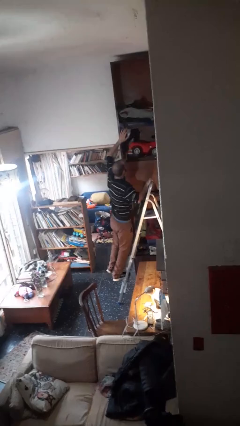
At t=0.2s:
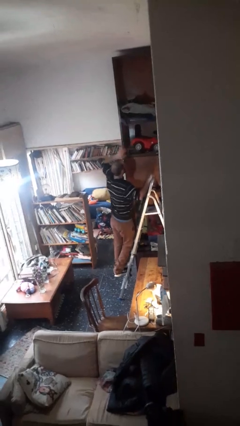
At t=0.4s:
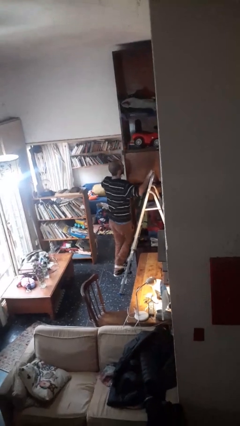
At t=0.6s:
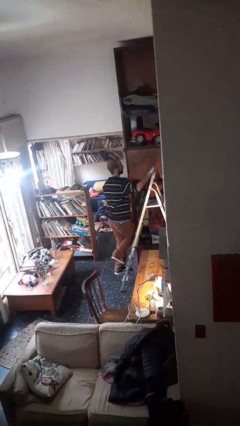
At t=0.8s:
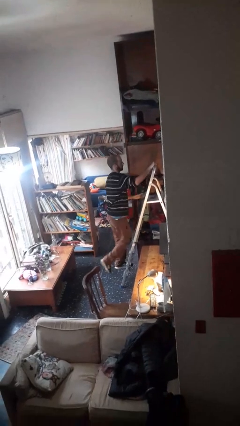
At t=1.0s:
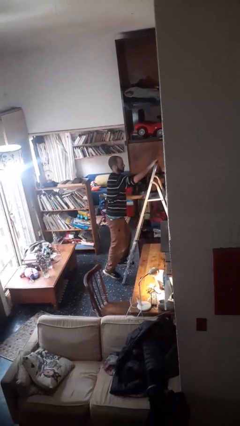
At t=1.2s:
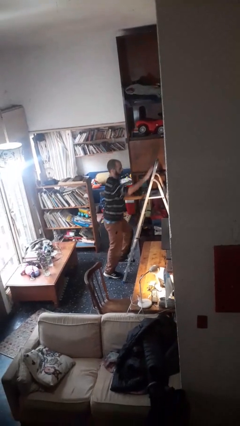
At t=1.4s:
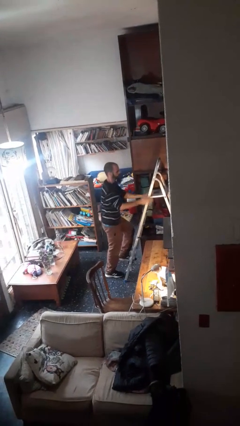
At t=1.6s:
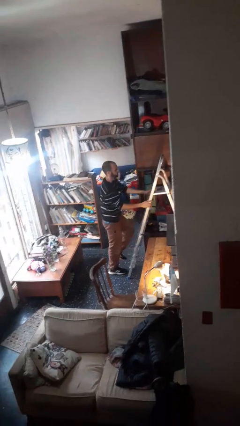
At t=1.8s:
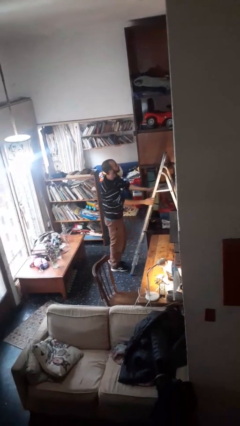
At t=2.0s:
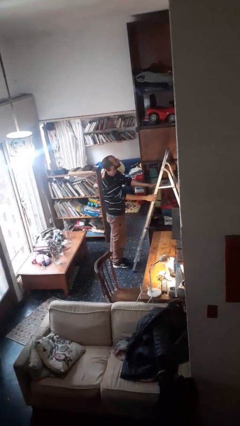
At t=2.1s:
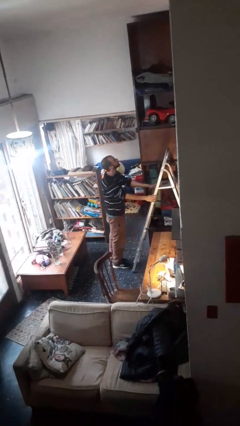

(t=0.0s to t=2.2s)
person climbs down ladder

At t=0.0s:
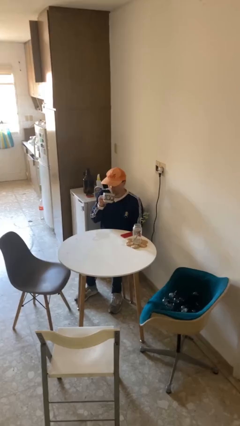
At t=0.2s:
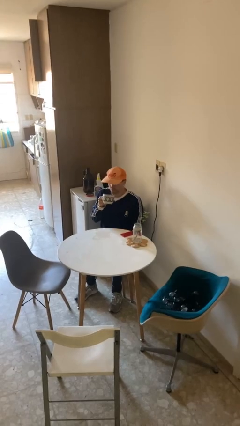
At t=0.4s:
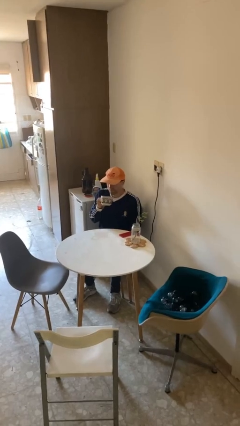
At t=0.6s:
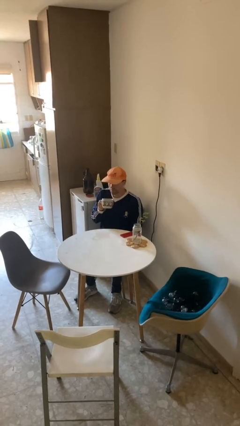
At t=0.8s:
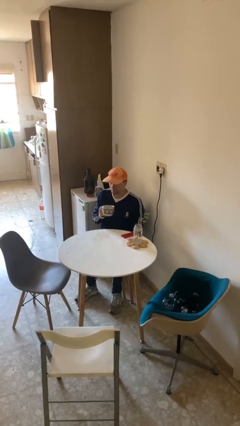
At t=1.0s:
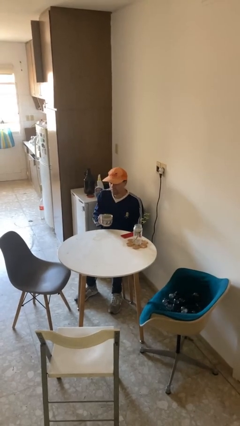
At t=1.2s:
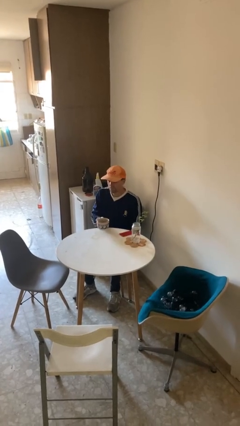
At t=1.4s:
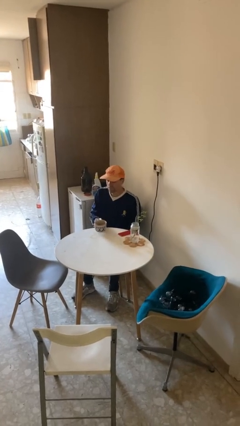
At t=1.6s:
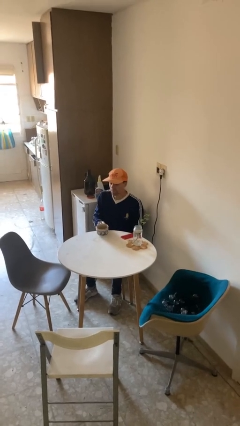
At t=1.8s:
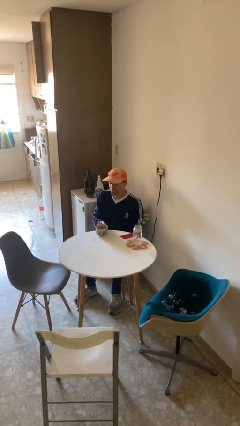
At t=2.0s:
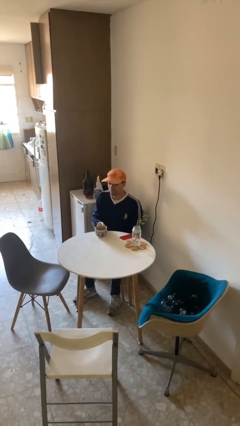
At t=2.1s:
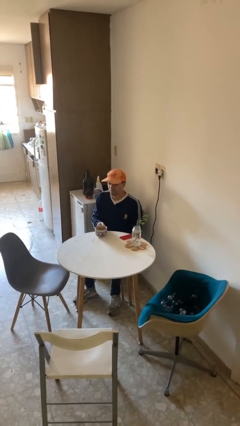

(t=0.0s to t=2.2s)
person puts down object on table

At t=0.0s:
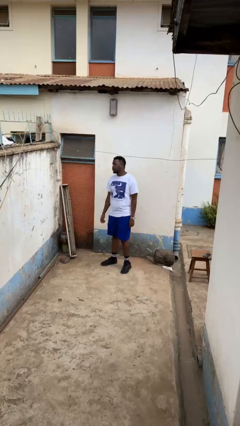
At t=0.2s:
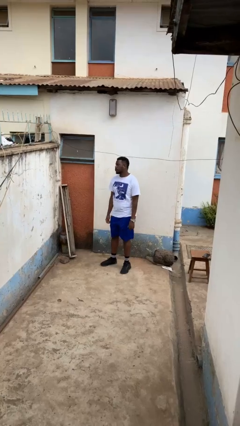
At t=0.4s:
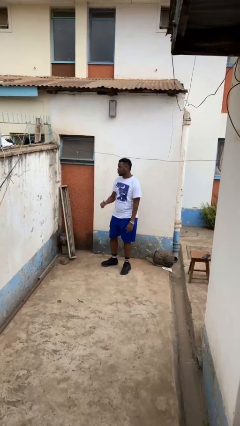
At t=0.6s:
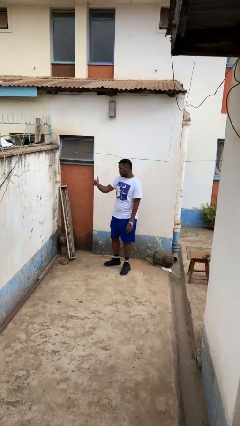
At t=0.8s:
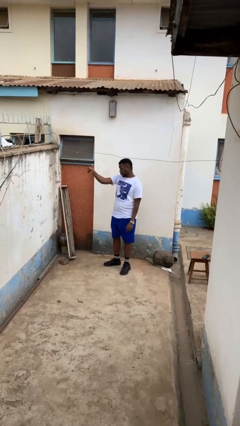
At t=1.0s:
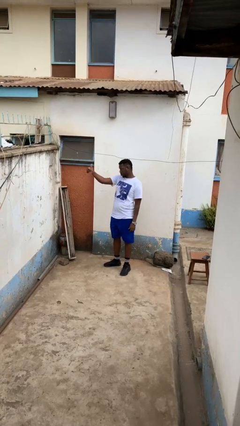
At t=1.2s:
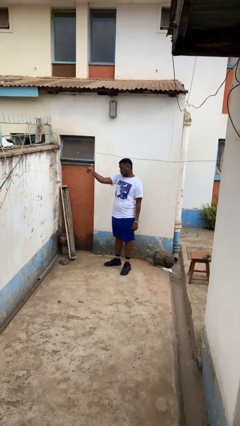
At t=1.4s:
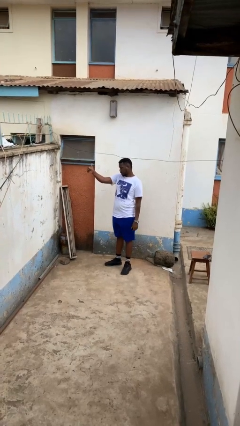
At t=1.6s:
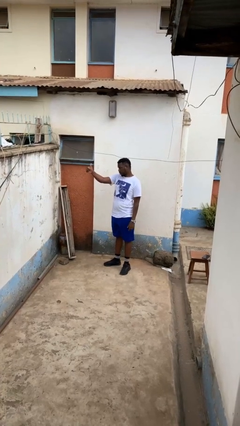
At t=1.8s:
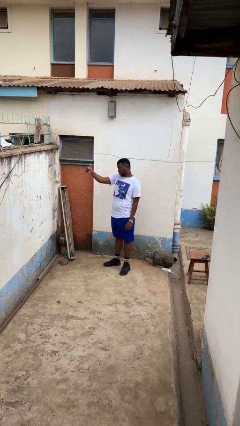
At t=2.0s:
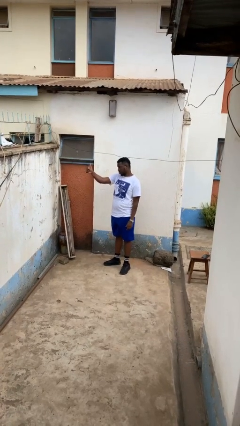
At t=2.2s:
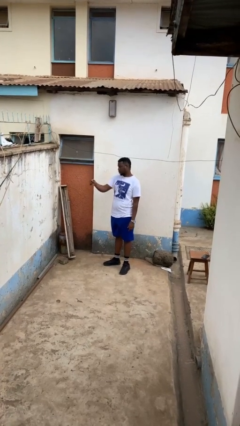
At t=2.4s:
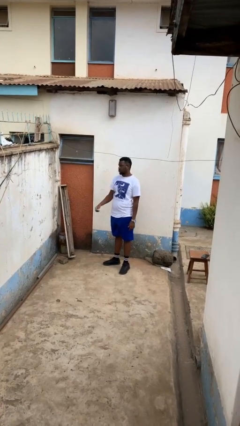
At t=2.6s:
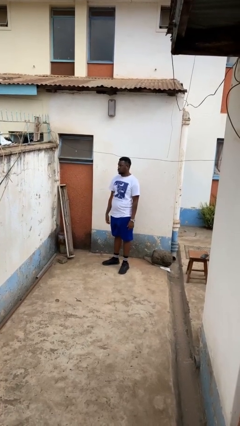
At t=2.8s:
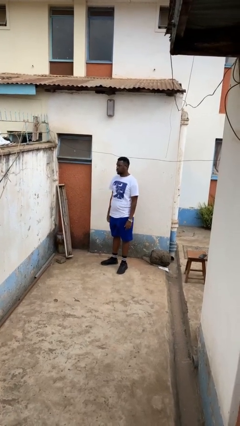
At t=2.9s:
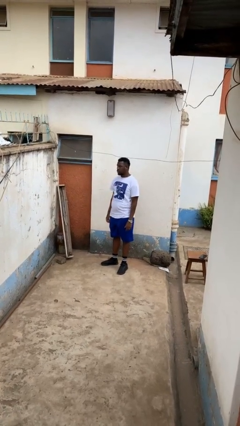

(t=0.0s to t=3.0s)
person gestures thumbs up

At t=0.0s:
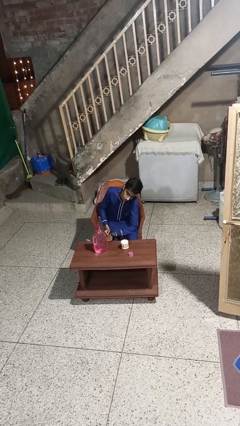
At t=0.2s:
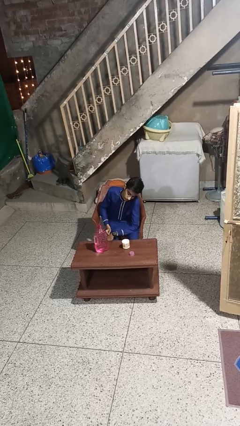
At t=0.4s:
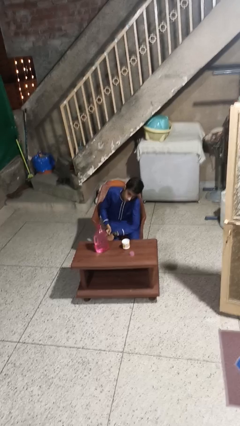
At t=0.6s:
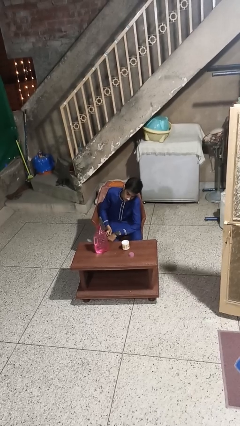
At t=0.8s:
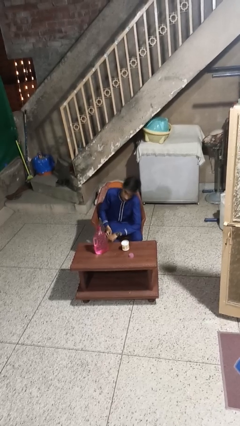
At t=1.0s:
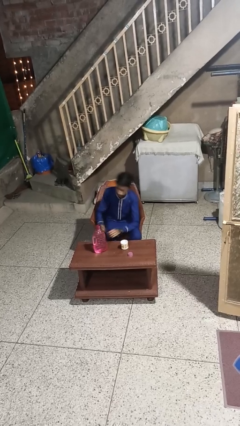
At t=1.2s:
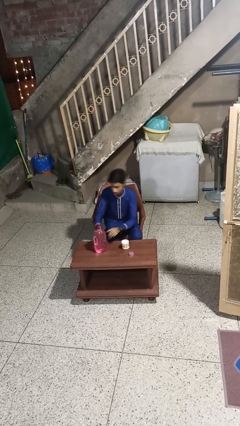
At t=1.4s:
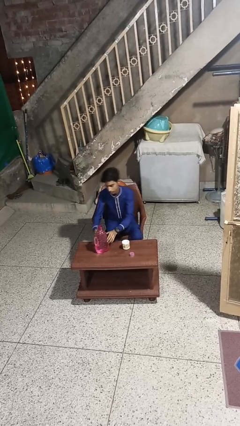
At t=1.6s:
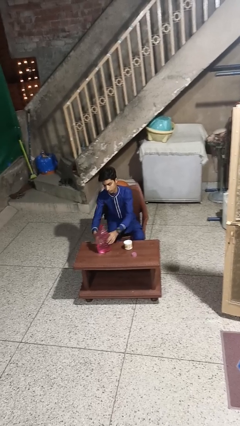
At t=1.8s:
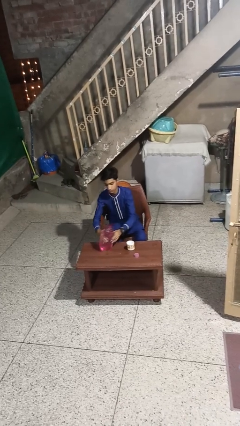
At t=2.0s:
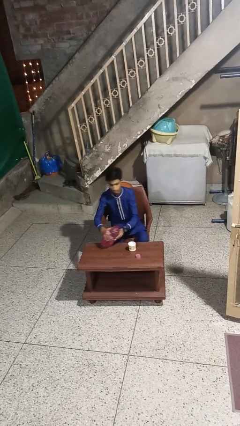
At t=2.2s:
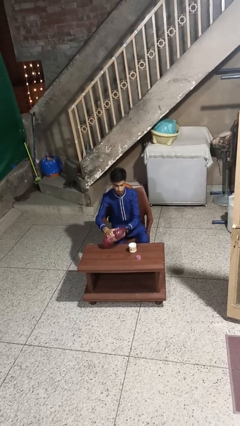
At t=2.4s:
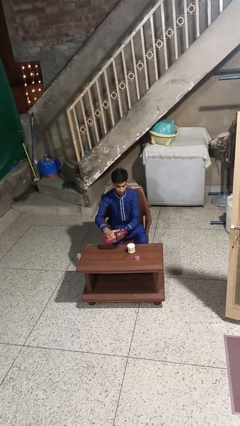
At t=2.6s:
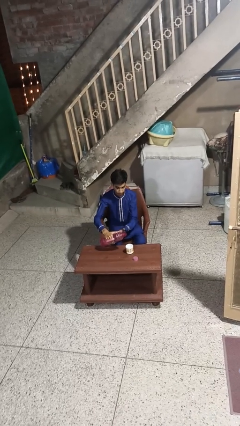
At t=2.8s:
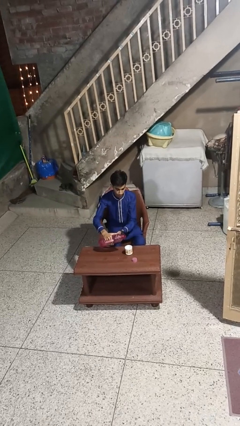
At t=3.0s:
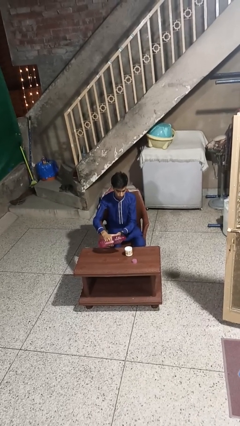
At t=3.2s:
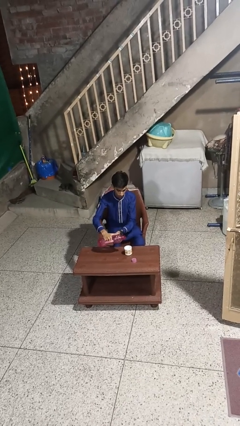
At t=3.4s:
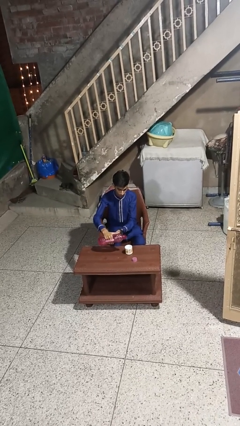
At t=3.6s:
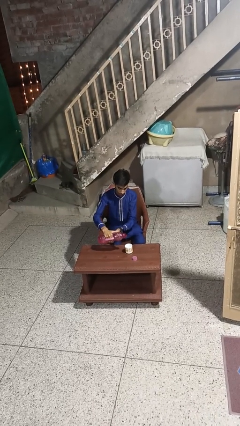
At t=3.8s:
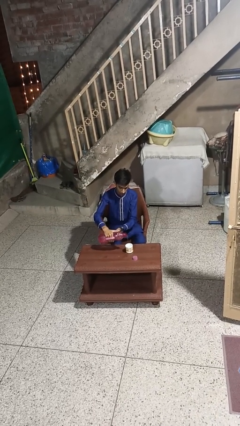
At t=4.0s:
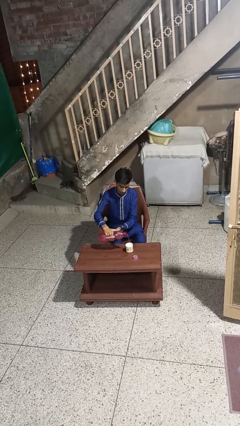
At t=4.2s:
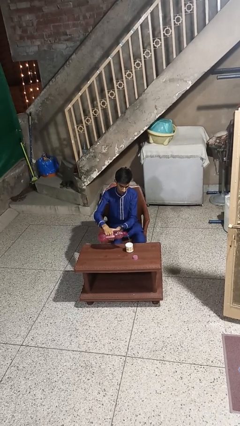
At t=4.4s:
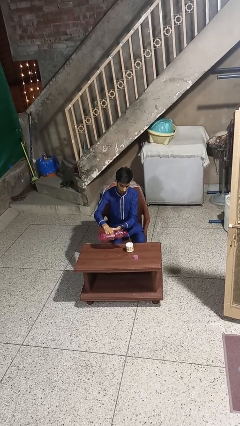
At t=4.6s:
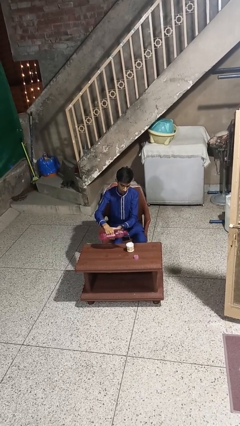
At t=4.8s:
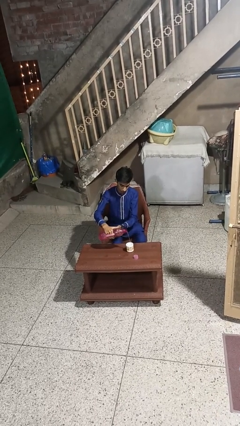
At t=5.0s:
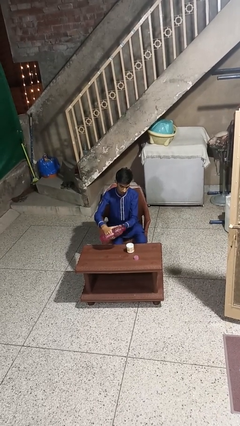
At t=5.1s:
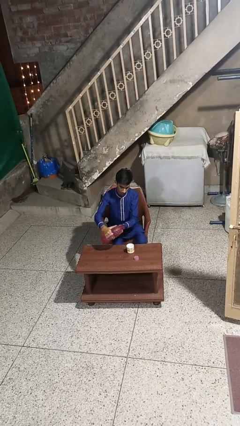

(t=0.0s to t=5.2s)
person pours liquid into cup

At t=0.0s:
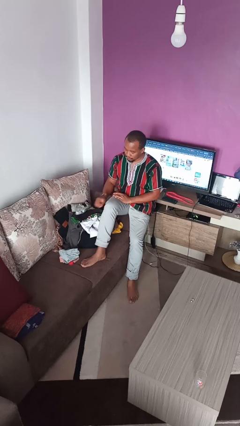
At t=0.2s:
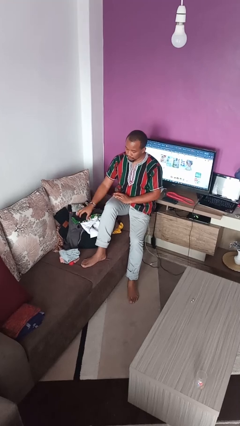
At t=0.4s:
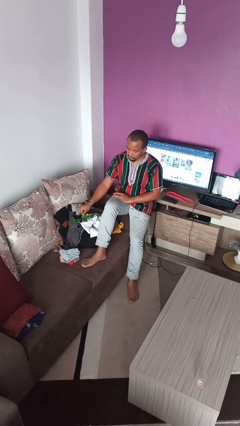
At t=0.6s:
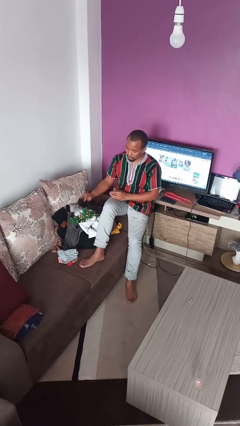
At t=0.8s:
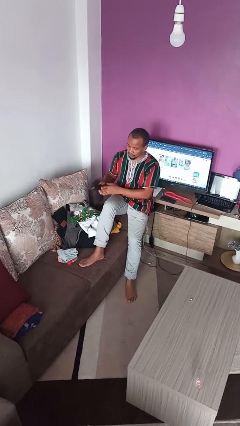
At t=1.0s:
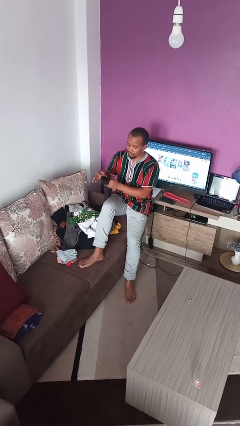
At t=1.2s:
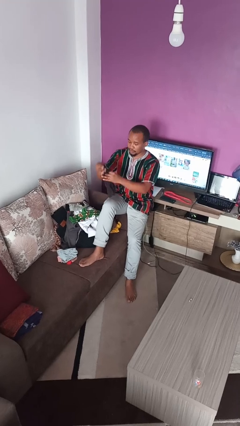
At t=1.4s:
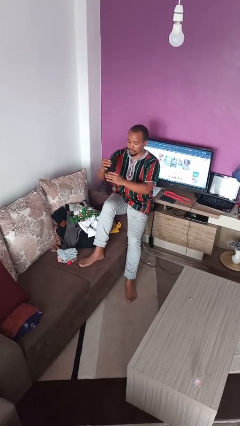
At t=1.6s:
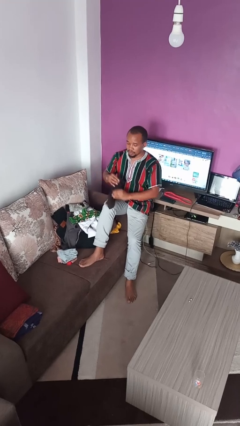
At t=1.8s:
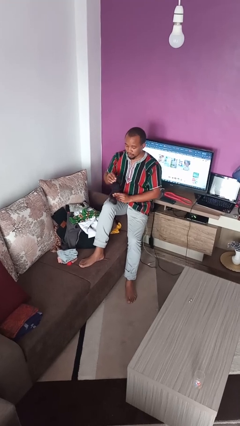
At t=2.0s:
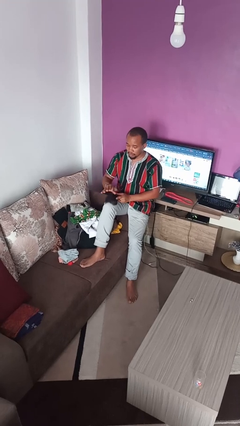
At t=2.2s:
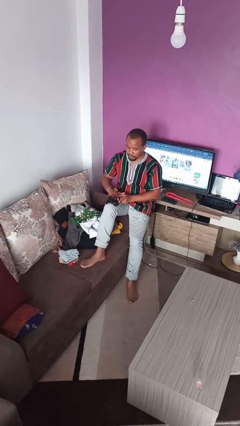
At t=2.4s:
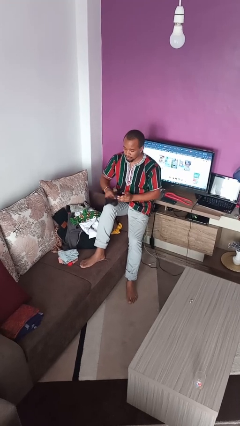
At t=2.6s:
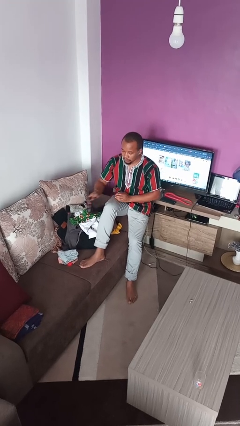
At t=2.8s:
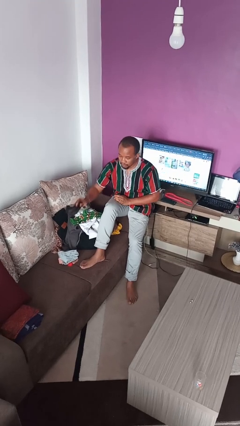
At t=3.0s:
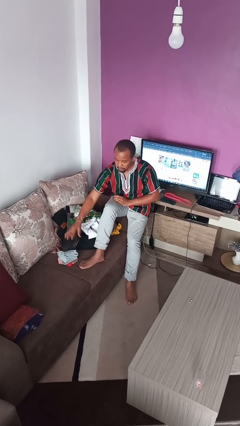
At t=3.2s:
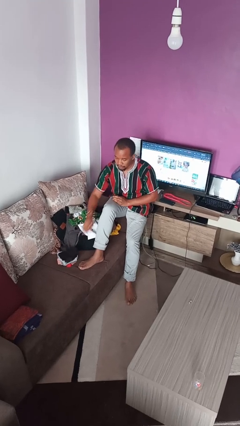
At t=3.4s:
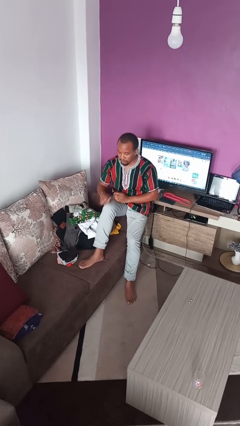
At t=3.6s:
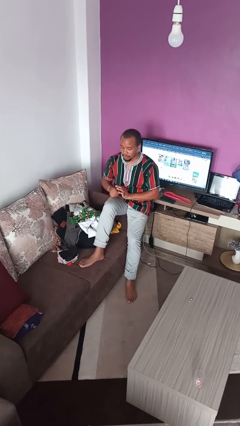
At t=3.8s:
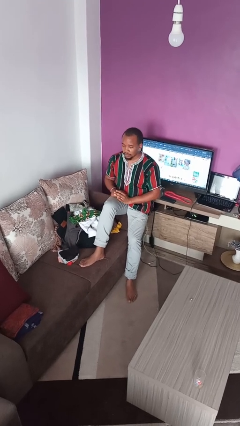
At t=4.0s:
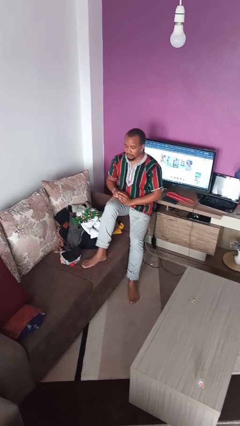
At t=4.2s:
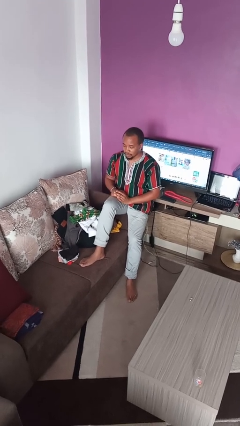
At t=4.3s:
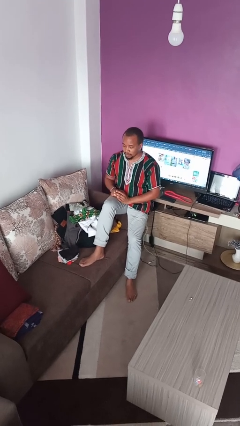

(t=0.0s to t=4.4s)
person folds socks

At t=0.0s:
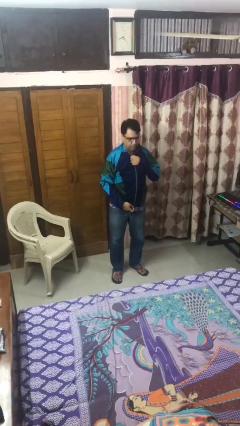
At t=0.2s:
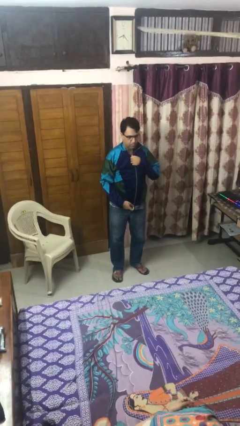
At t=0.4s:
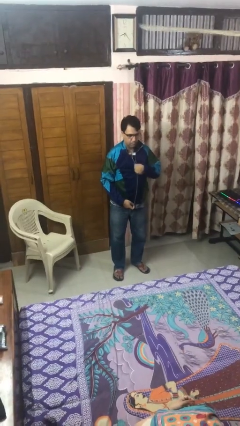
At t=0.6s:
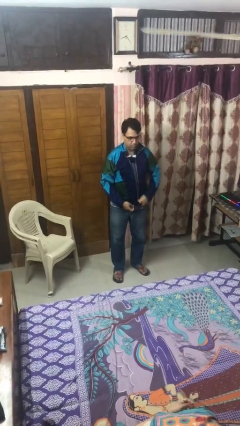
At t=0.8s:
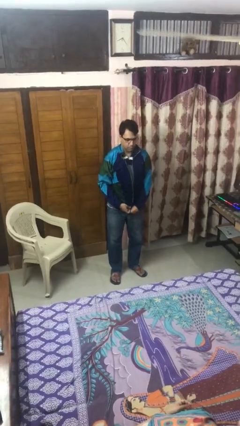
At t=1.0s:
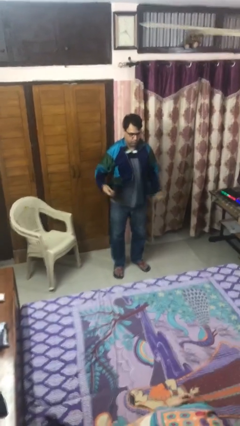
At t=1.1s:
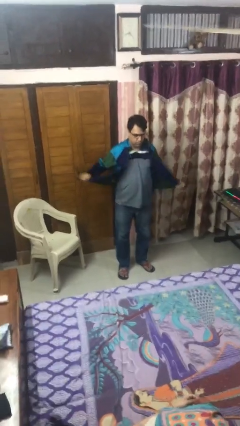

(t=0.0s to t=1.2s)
person unzips jacket
